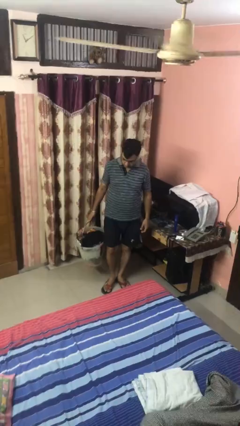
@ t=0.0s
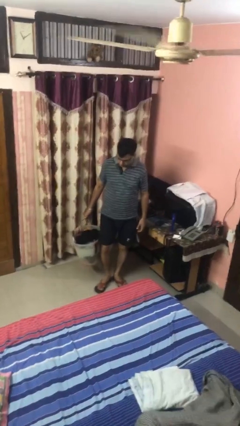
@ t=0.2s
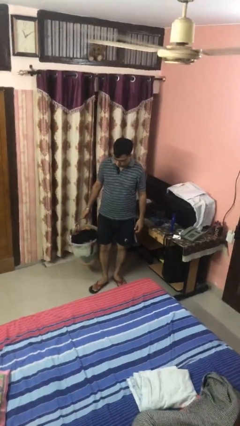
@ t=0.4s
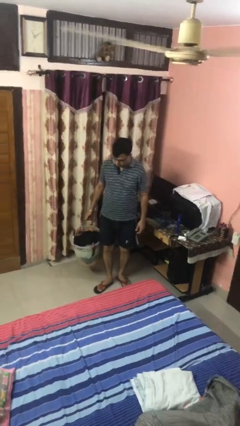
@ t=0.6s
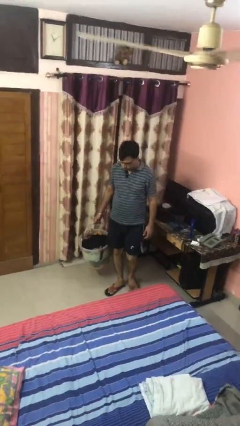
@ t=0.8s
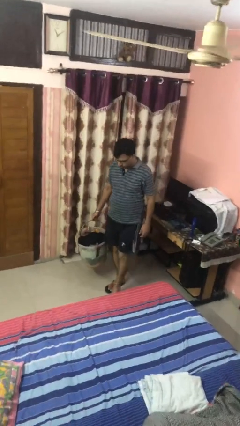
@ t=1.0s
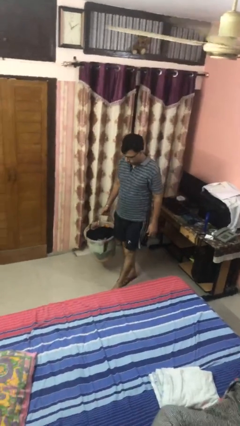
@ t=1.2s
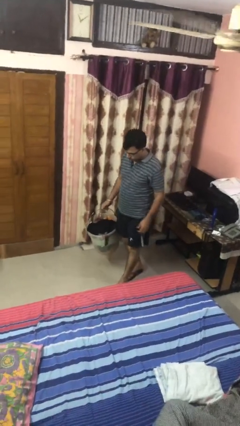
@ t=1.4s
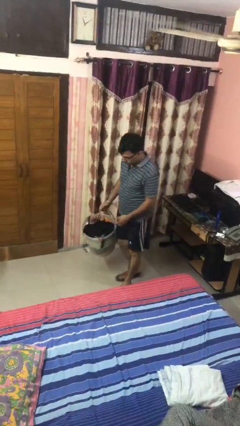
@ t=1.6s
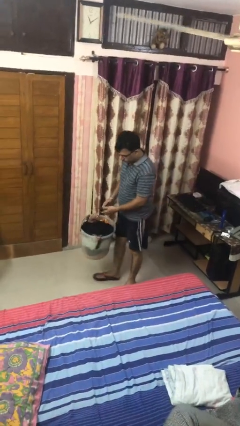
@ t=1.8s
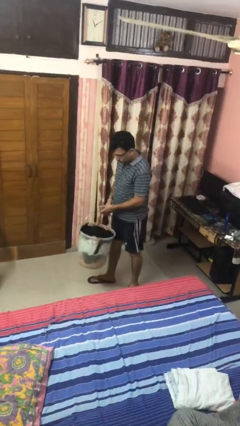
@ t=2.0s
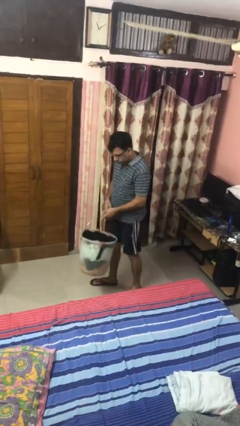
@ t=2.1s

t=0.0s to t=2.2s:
person carries laundry basket

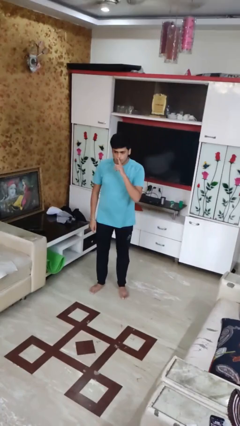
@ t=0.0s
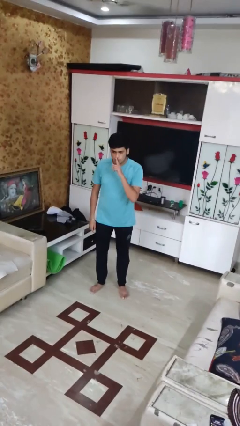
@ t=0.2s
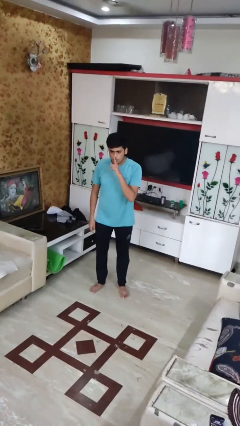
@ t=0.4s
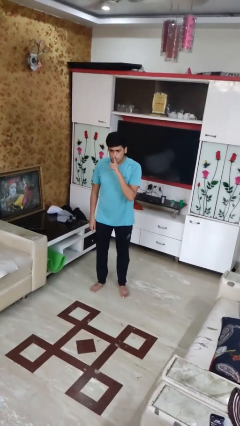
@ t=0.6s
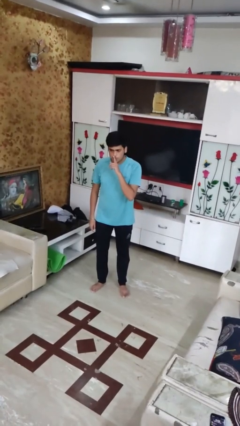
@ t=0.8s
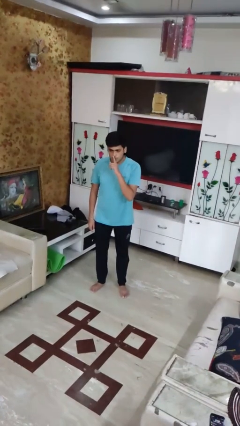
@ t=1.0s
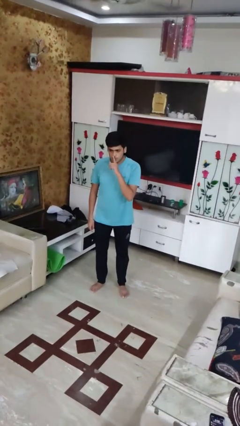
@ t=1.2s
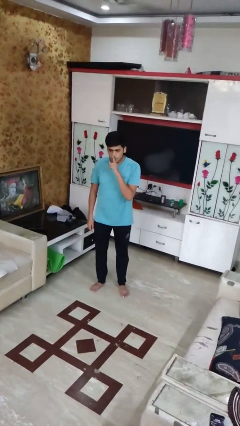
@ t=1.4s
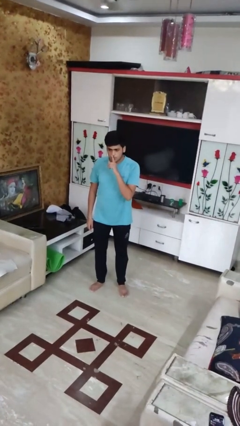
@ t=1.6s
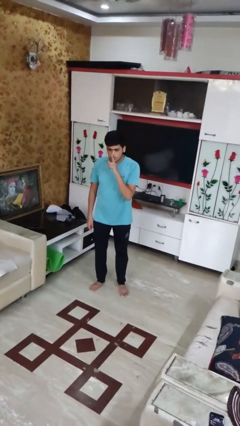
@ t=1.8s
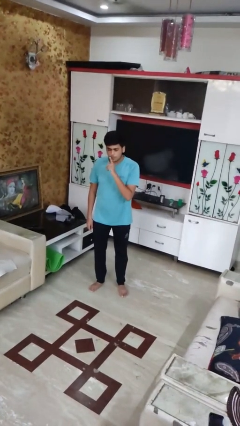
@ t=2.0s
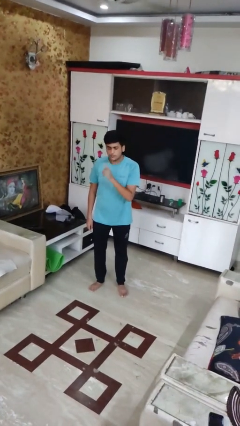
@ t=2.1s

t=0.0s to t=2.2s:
person gestures be quiet

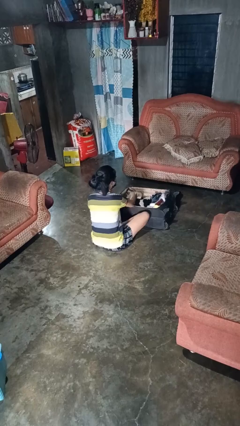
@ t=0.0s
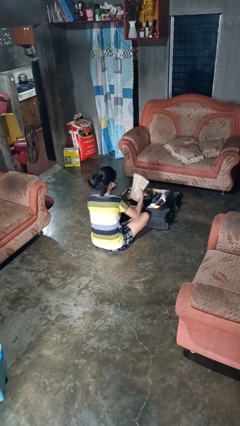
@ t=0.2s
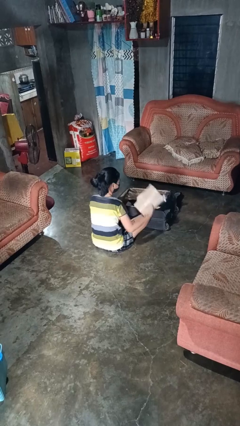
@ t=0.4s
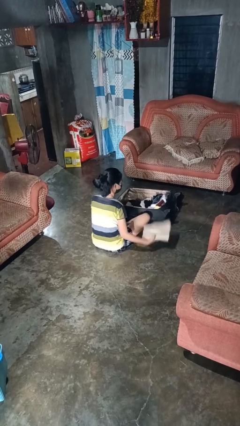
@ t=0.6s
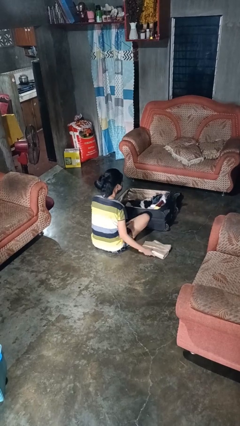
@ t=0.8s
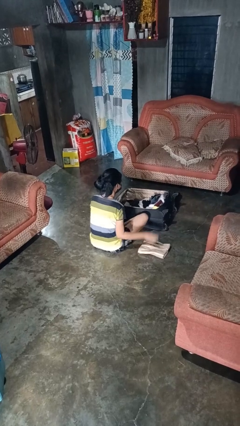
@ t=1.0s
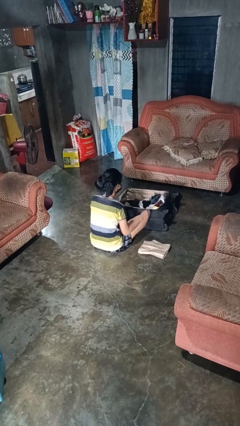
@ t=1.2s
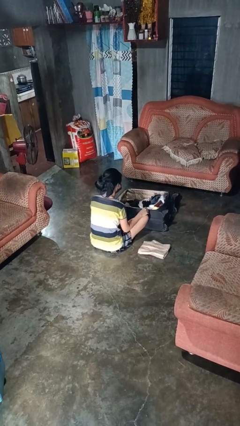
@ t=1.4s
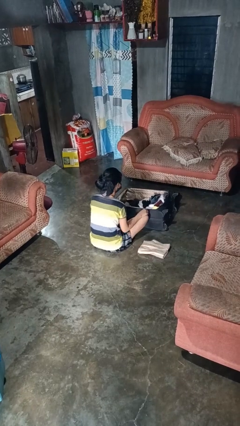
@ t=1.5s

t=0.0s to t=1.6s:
person unloads clothes from suitcase

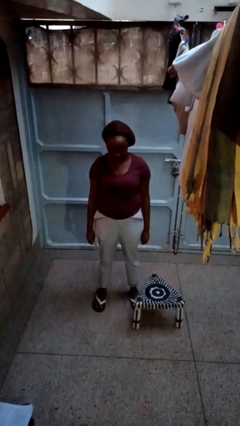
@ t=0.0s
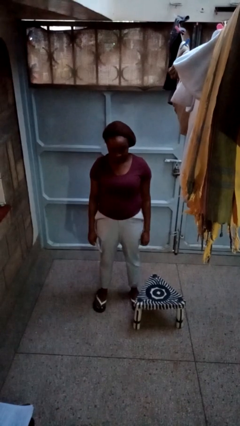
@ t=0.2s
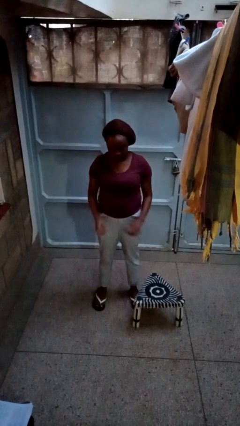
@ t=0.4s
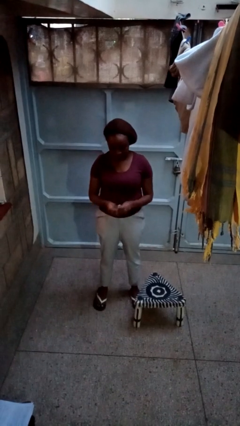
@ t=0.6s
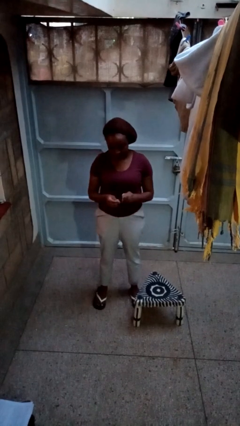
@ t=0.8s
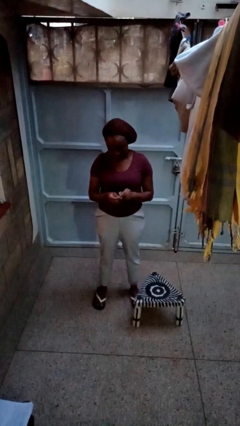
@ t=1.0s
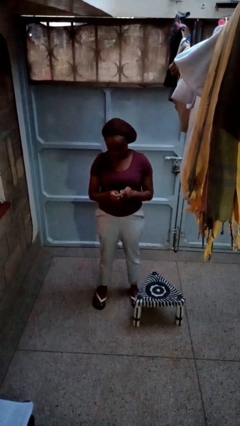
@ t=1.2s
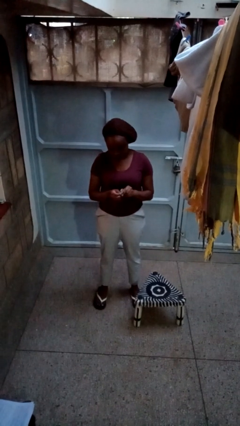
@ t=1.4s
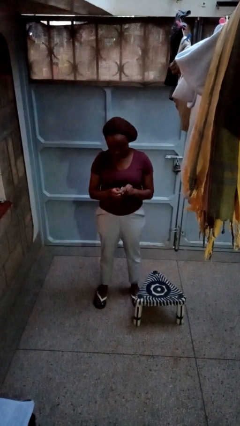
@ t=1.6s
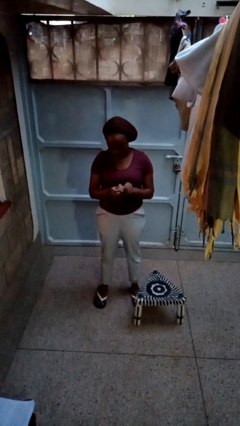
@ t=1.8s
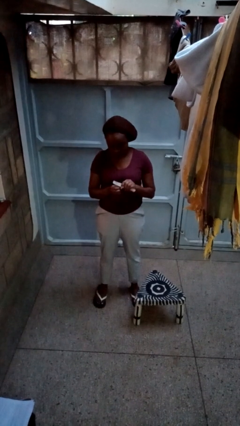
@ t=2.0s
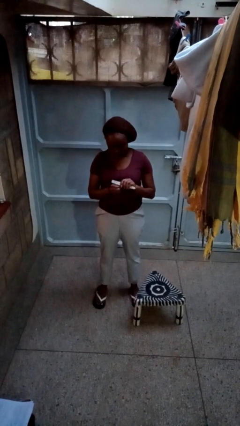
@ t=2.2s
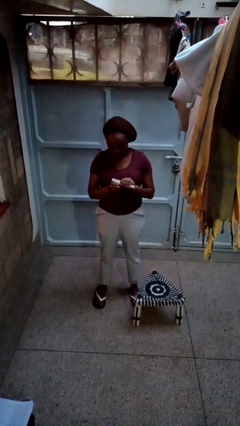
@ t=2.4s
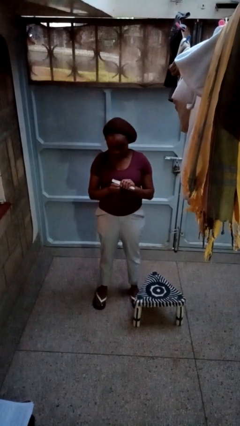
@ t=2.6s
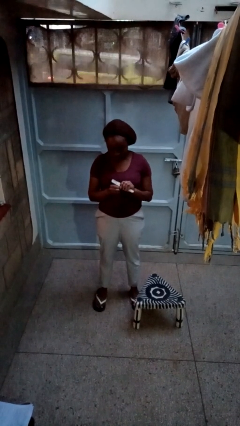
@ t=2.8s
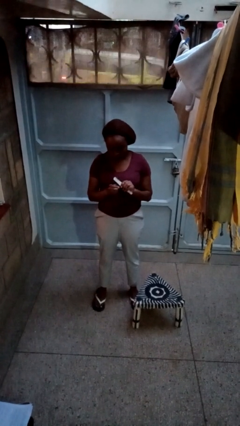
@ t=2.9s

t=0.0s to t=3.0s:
person files fingernails

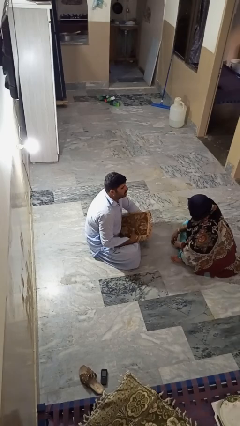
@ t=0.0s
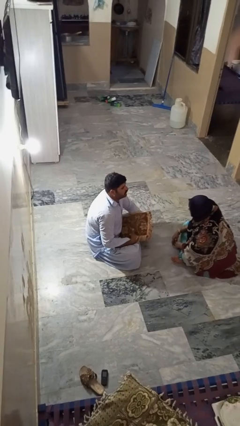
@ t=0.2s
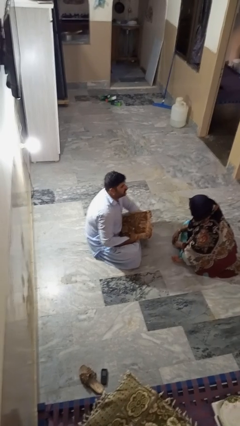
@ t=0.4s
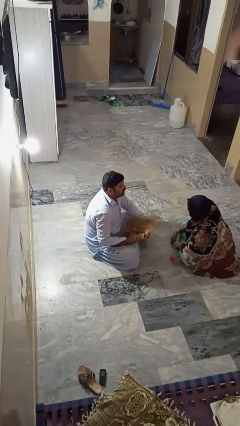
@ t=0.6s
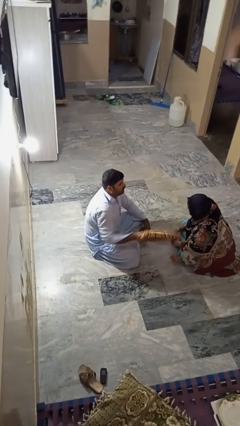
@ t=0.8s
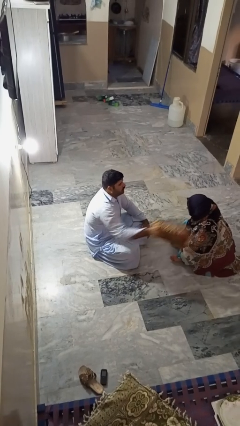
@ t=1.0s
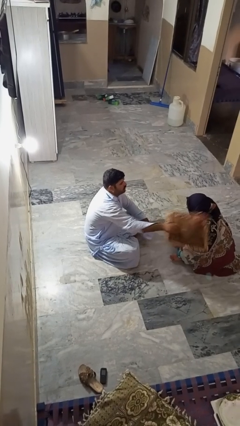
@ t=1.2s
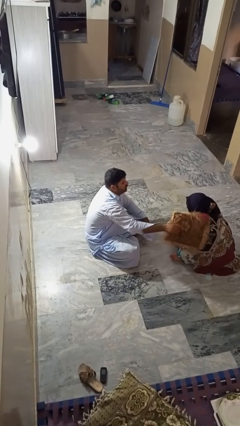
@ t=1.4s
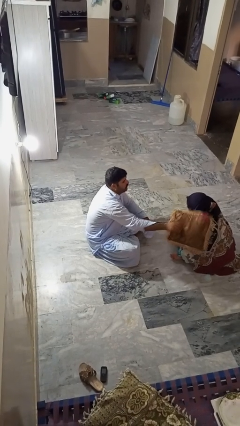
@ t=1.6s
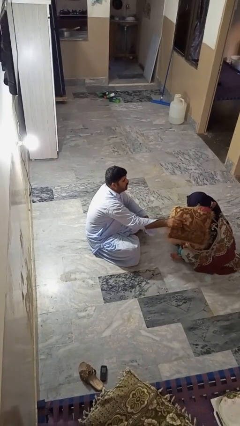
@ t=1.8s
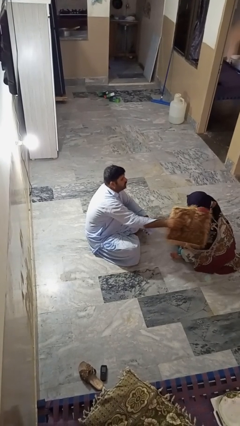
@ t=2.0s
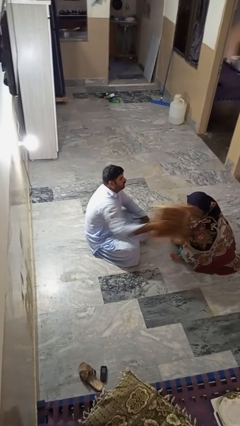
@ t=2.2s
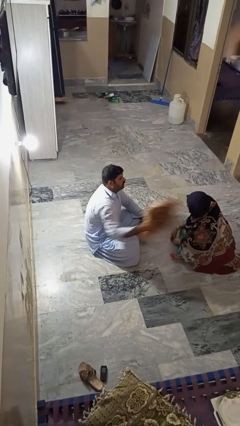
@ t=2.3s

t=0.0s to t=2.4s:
person hits person with pillow

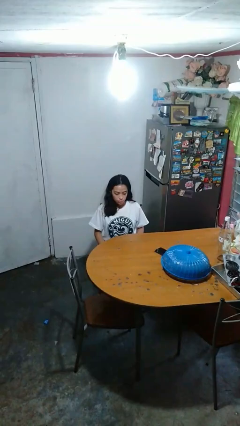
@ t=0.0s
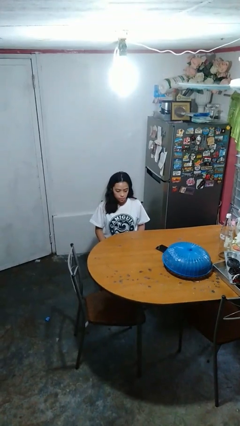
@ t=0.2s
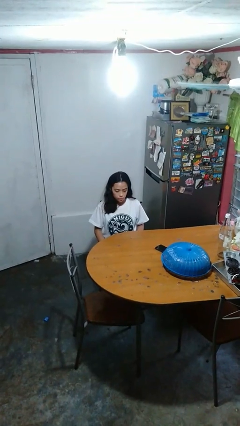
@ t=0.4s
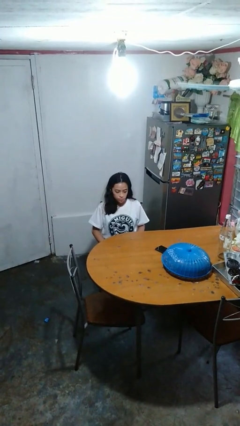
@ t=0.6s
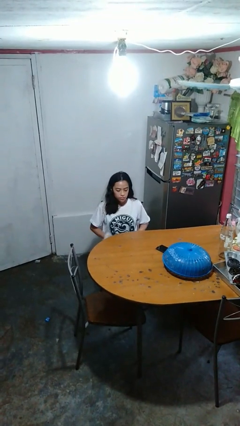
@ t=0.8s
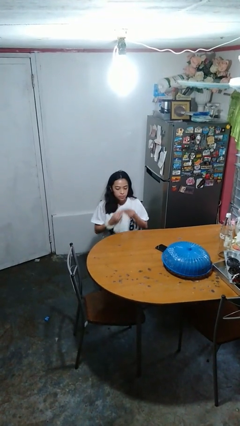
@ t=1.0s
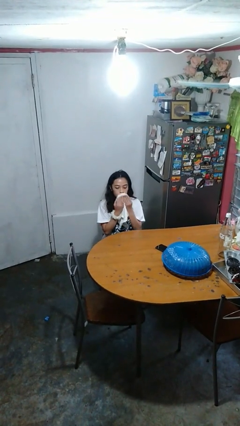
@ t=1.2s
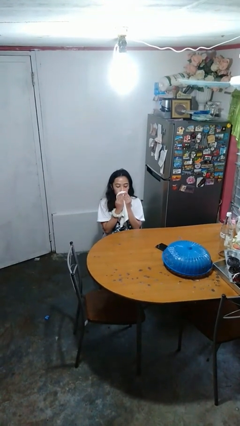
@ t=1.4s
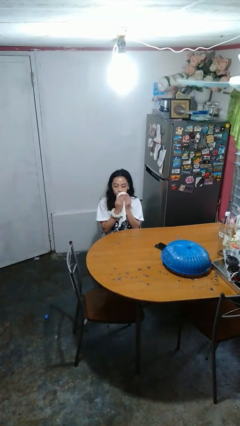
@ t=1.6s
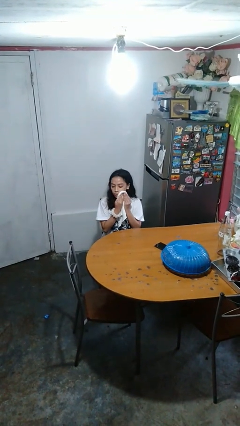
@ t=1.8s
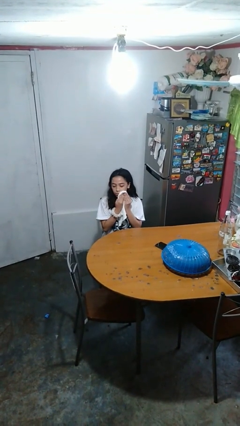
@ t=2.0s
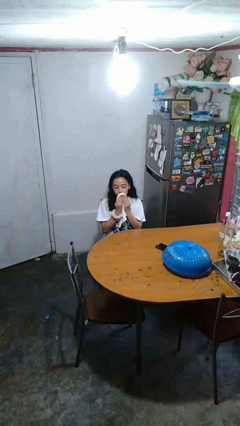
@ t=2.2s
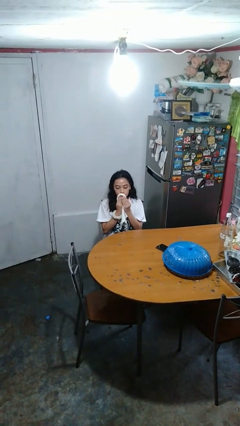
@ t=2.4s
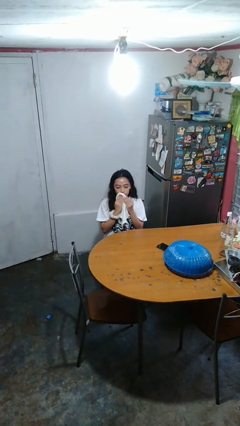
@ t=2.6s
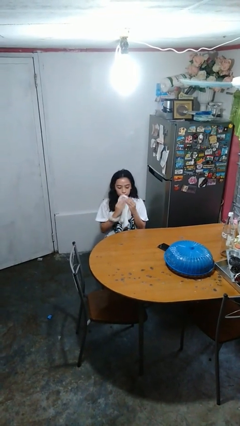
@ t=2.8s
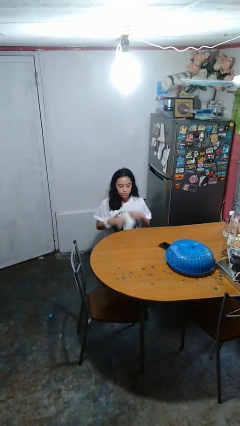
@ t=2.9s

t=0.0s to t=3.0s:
person wipes mouth with napkin

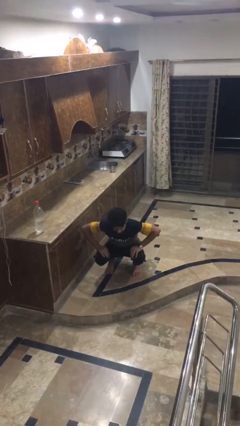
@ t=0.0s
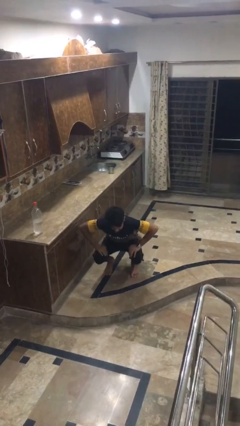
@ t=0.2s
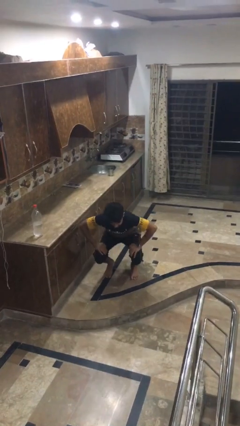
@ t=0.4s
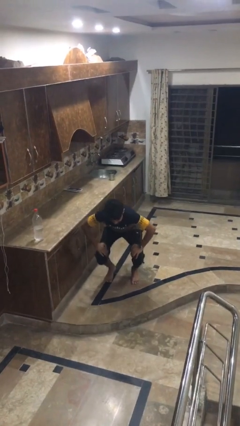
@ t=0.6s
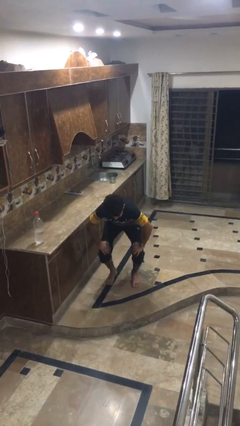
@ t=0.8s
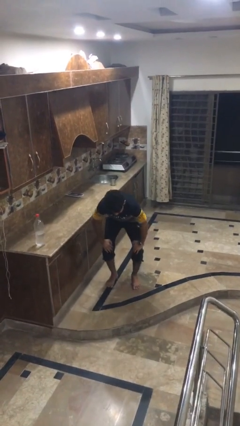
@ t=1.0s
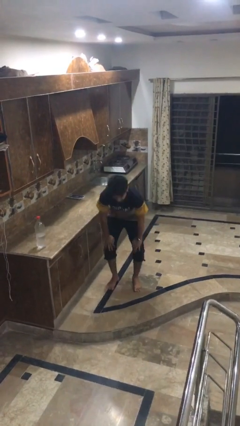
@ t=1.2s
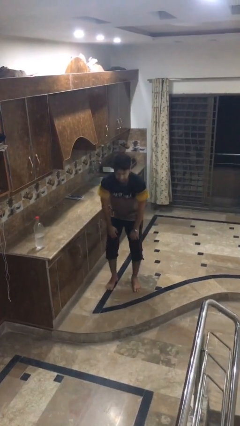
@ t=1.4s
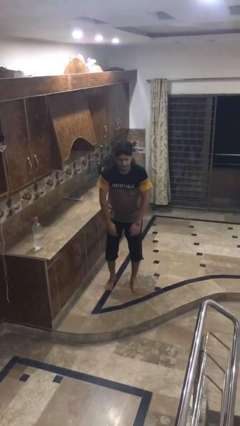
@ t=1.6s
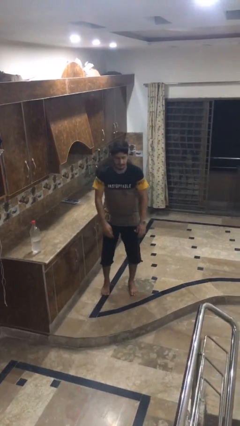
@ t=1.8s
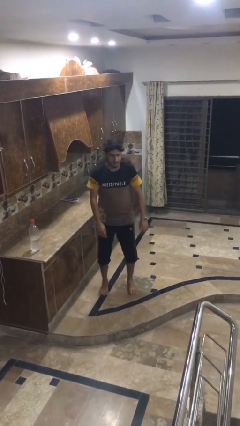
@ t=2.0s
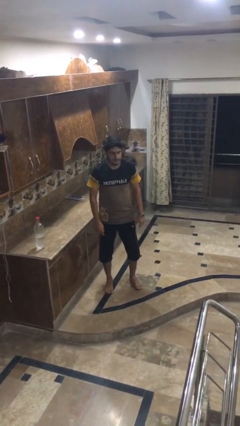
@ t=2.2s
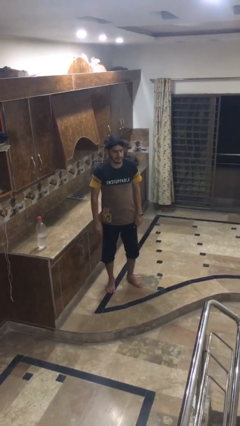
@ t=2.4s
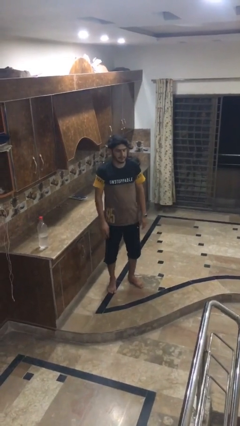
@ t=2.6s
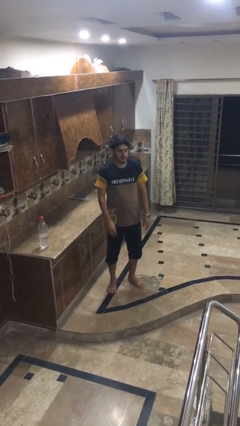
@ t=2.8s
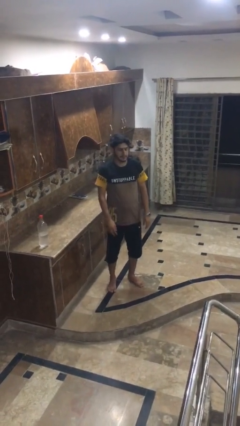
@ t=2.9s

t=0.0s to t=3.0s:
person stands up
